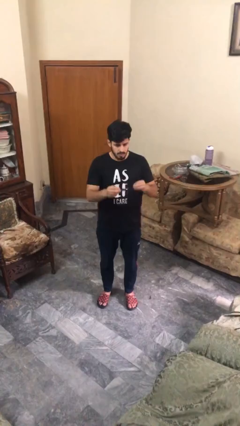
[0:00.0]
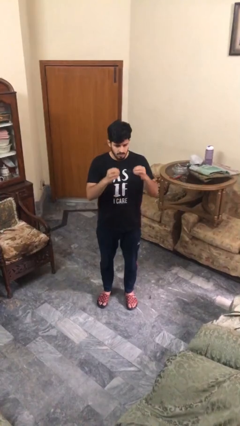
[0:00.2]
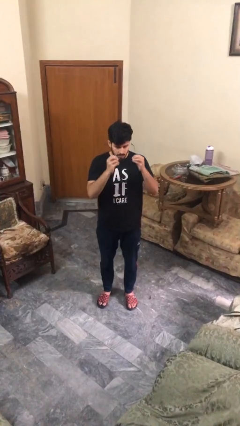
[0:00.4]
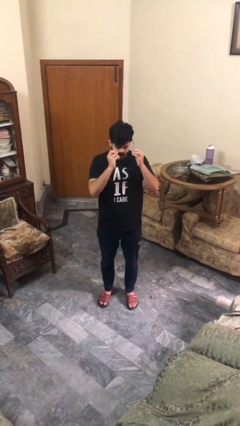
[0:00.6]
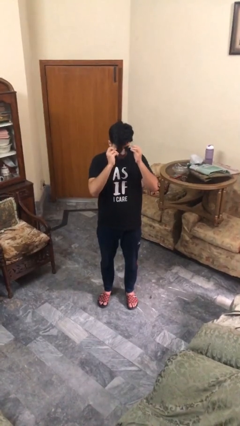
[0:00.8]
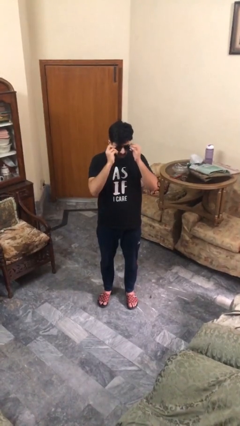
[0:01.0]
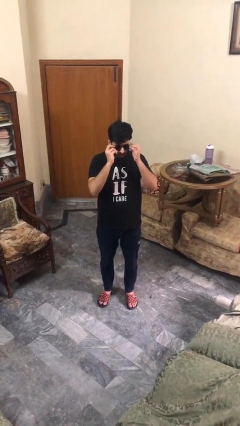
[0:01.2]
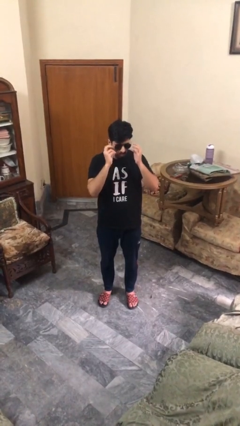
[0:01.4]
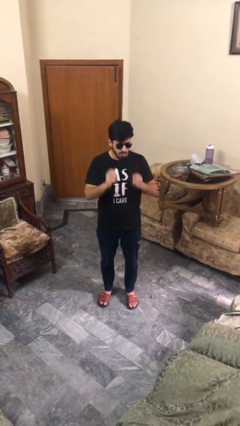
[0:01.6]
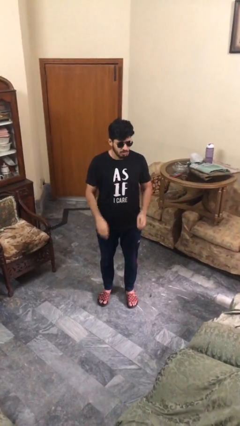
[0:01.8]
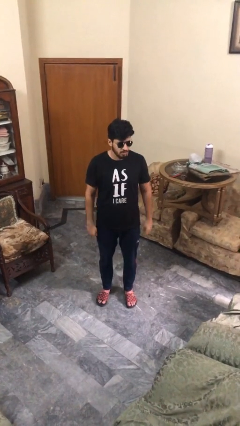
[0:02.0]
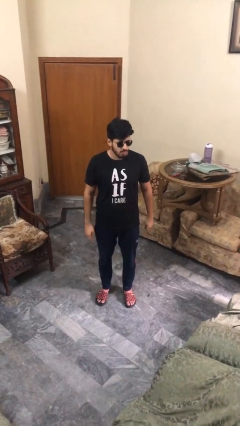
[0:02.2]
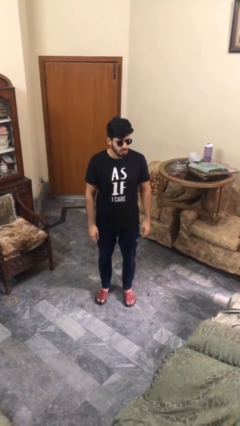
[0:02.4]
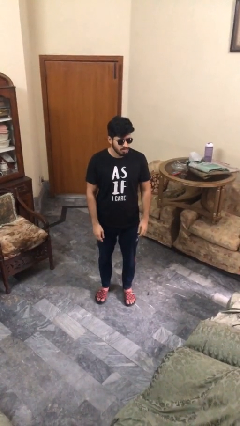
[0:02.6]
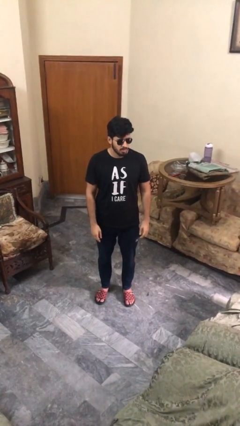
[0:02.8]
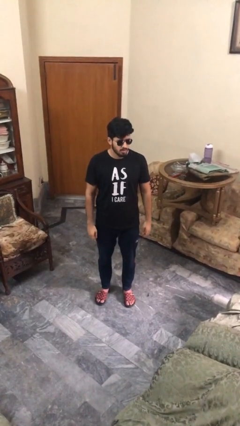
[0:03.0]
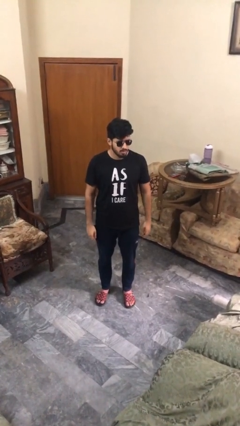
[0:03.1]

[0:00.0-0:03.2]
person puts on sunglasses

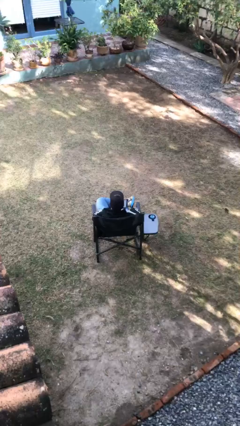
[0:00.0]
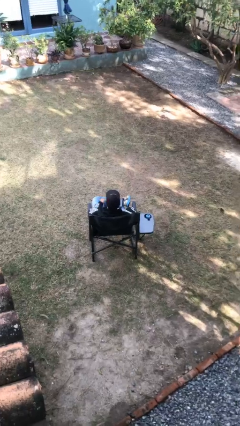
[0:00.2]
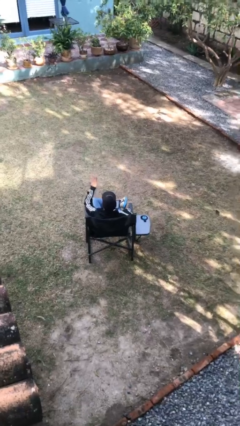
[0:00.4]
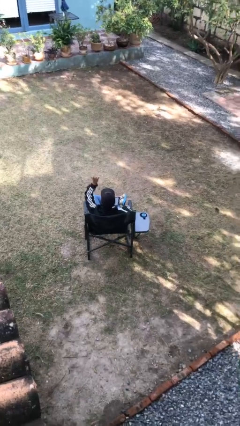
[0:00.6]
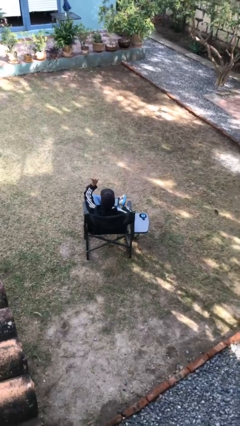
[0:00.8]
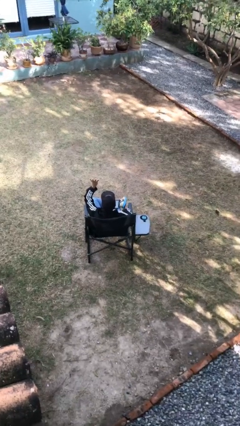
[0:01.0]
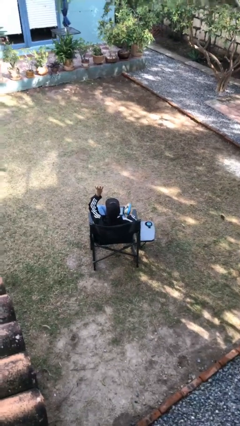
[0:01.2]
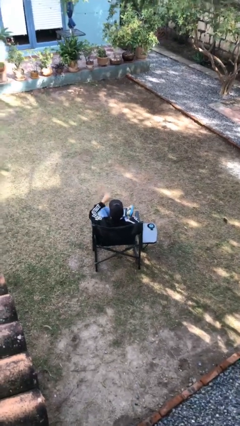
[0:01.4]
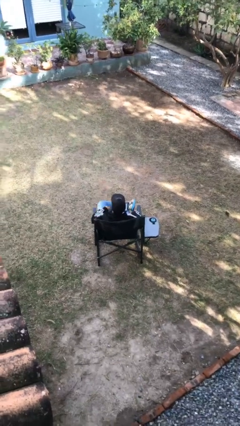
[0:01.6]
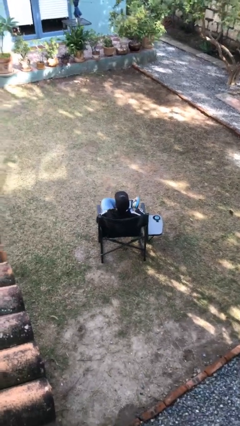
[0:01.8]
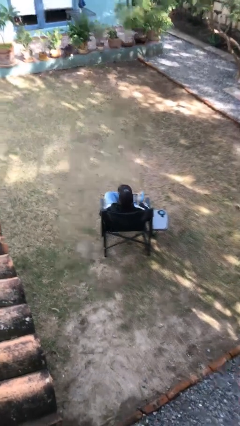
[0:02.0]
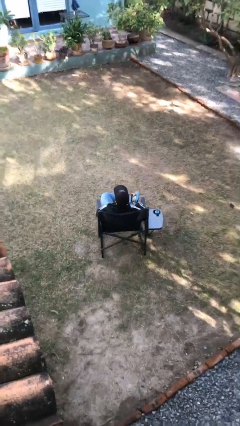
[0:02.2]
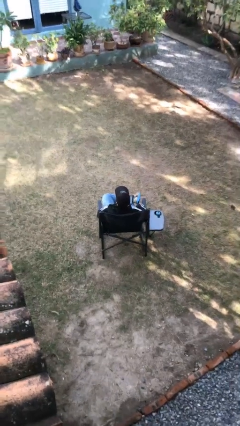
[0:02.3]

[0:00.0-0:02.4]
person gestures number four

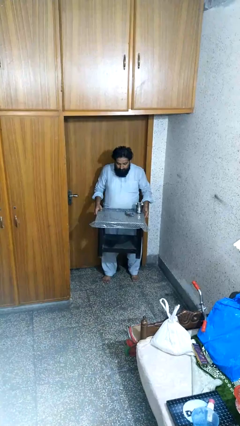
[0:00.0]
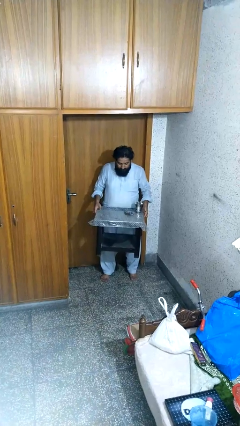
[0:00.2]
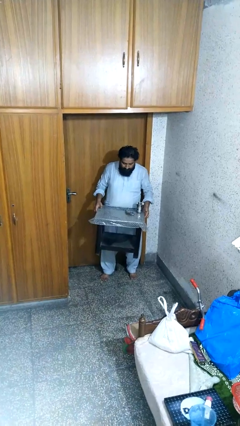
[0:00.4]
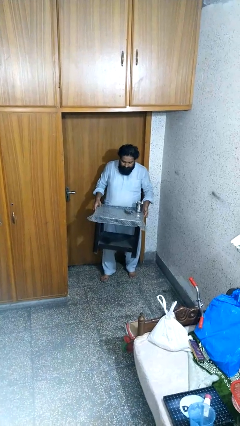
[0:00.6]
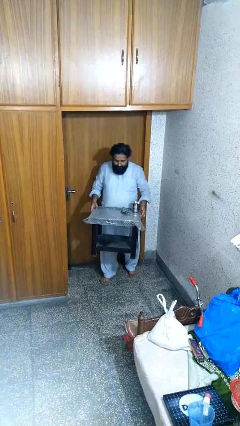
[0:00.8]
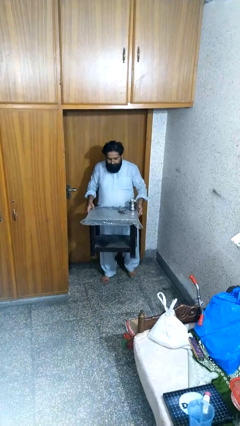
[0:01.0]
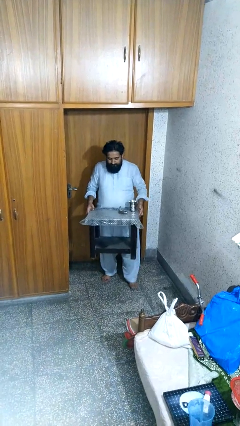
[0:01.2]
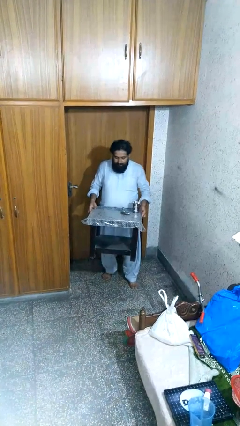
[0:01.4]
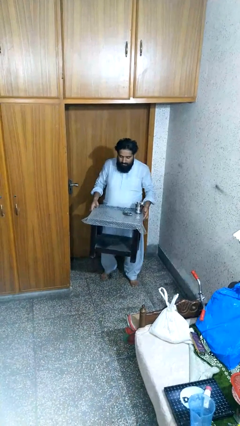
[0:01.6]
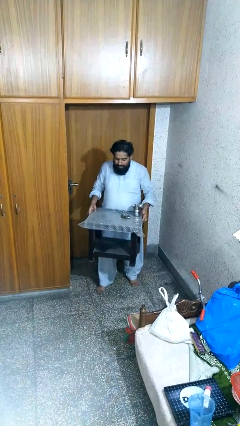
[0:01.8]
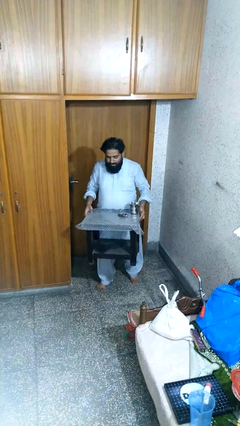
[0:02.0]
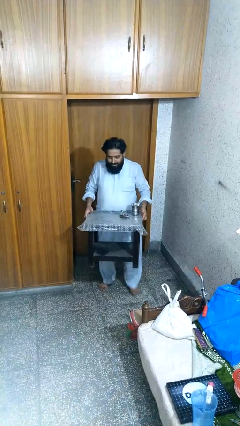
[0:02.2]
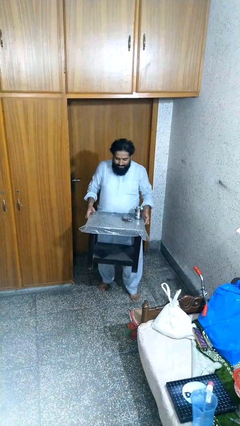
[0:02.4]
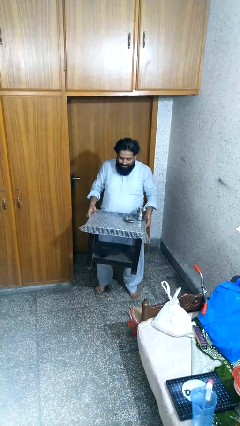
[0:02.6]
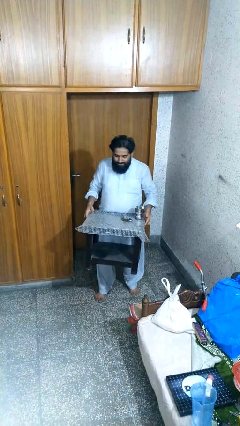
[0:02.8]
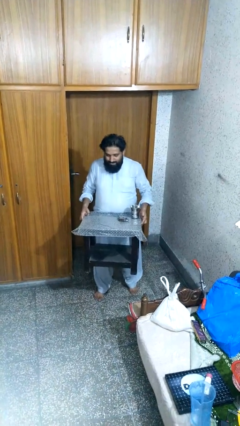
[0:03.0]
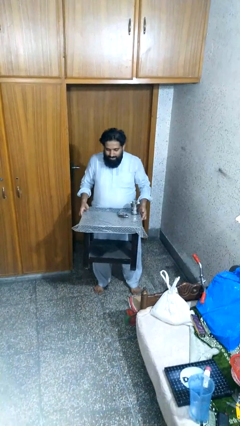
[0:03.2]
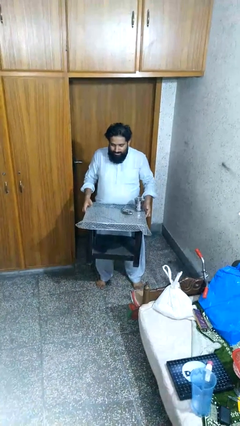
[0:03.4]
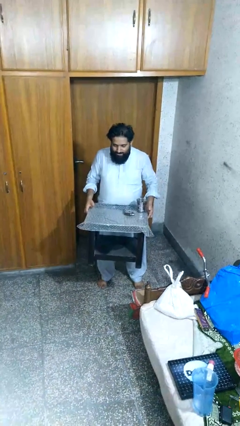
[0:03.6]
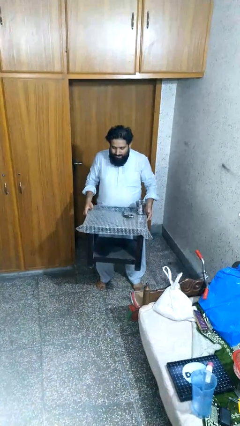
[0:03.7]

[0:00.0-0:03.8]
person carries furniture

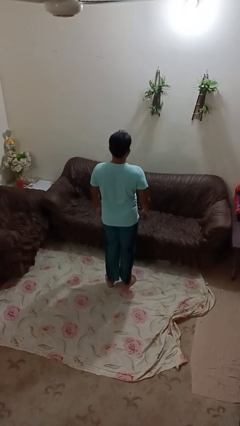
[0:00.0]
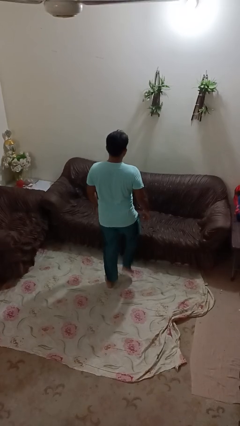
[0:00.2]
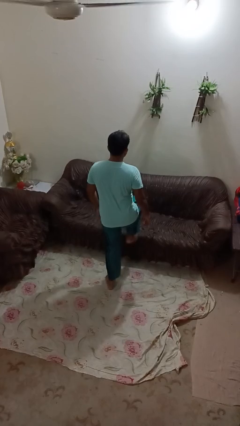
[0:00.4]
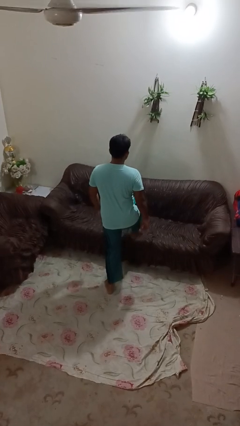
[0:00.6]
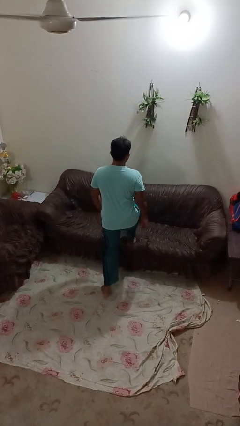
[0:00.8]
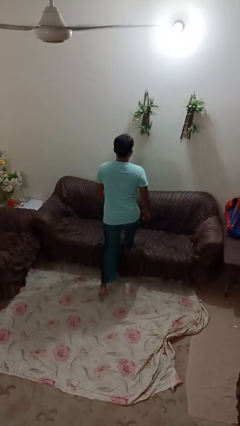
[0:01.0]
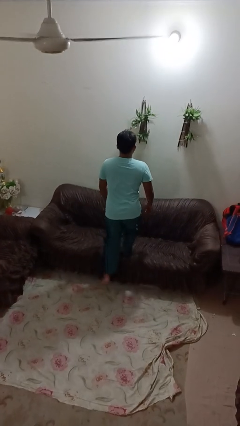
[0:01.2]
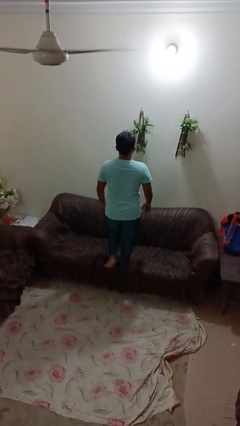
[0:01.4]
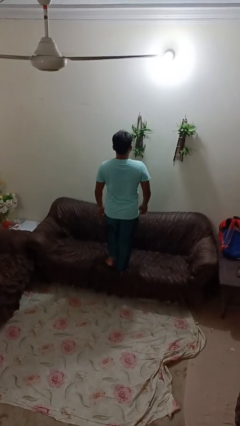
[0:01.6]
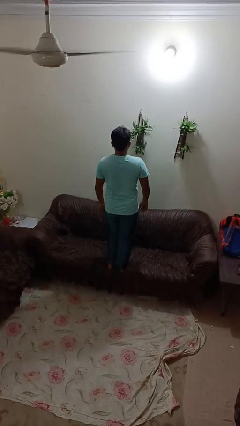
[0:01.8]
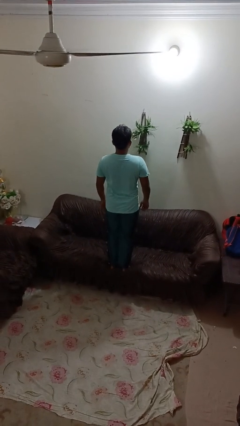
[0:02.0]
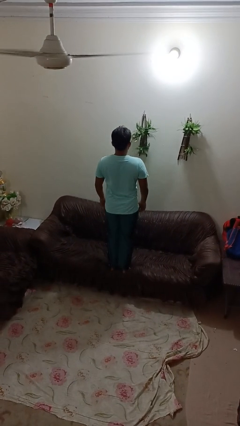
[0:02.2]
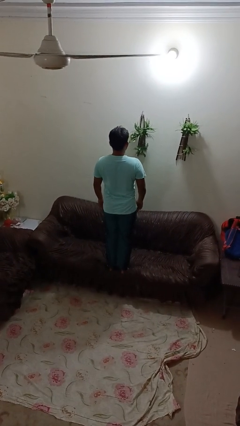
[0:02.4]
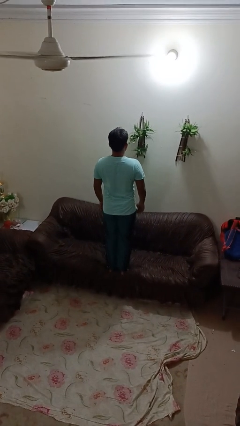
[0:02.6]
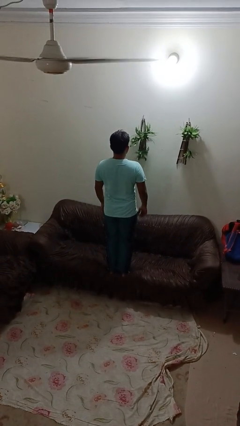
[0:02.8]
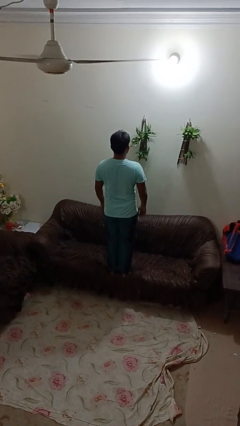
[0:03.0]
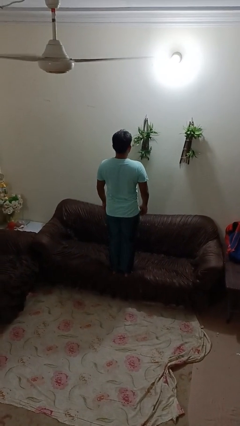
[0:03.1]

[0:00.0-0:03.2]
person climbs on couch

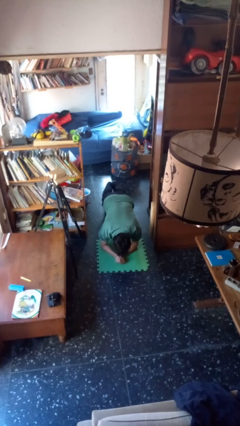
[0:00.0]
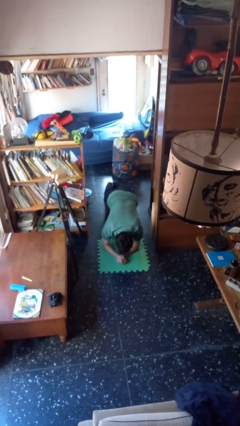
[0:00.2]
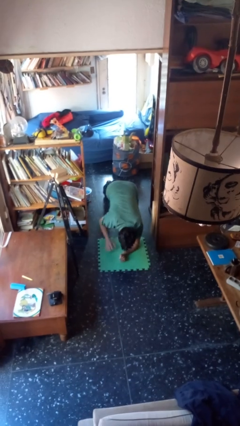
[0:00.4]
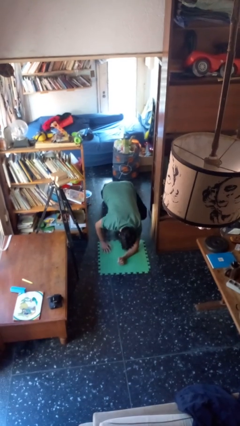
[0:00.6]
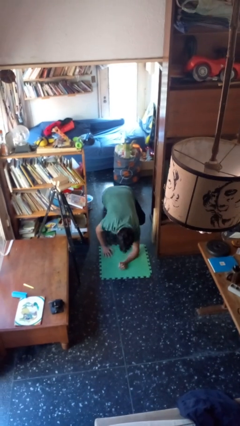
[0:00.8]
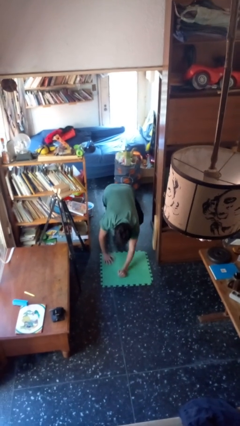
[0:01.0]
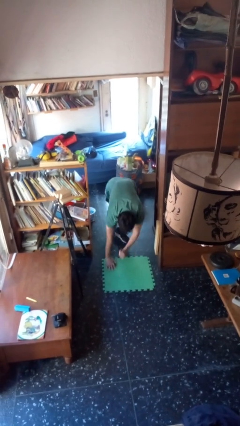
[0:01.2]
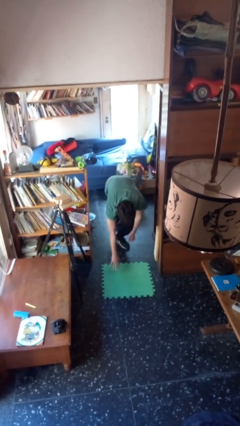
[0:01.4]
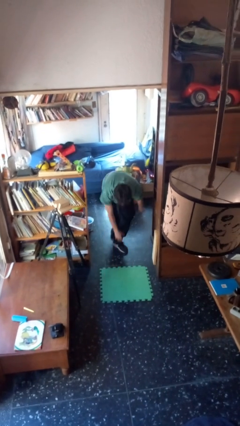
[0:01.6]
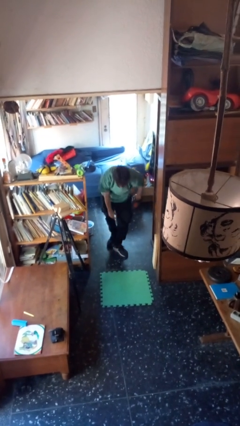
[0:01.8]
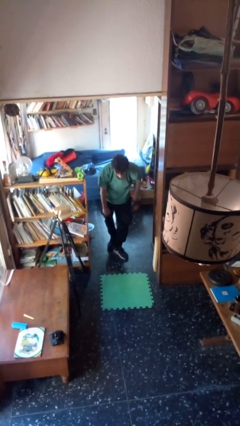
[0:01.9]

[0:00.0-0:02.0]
person stands up from floor

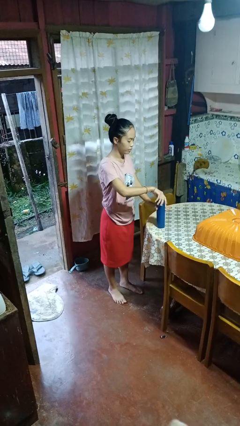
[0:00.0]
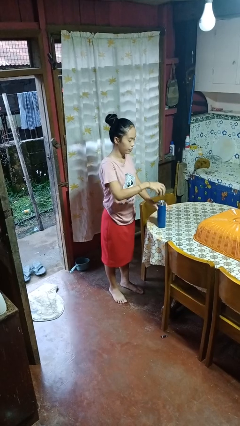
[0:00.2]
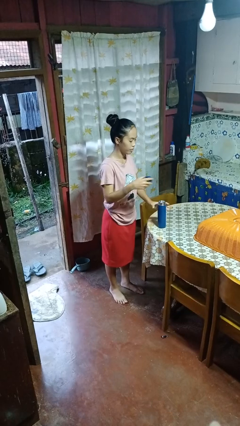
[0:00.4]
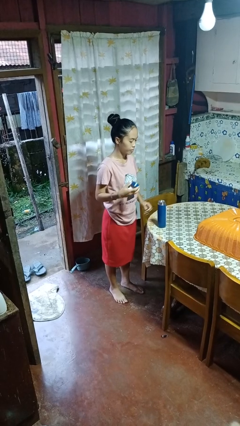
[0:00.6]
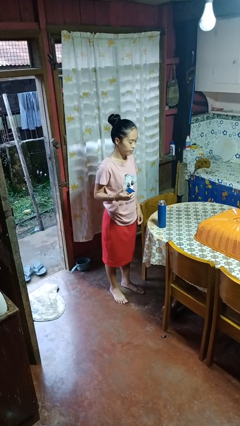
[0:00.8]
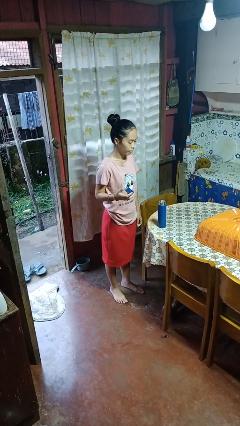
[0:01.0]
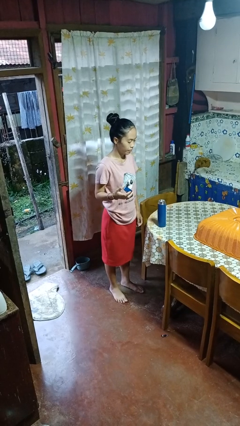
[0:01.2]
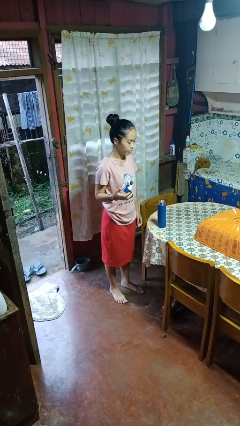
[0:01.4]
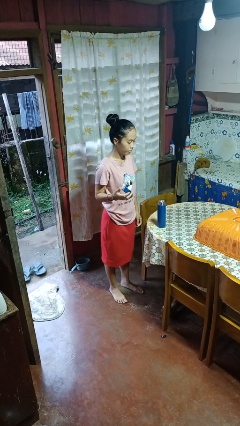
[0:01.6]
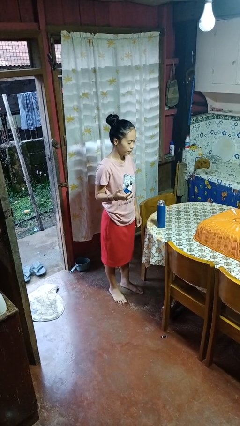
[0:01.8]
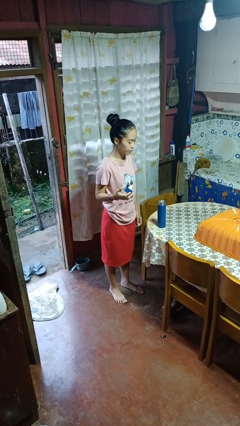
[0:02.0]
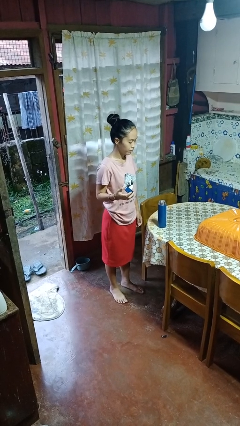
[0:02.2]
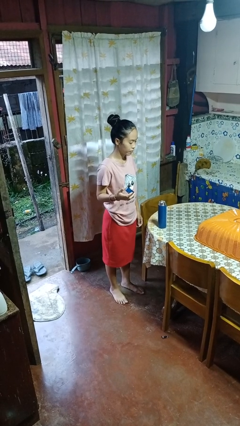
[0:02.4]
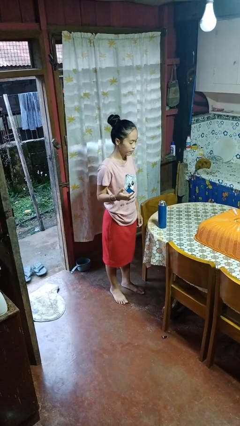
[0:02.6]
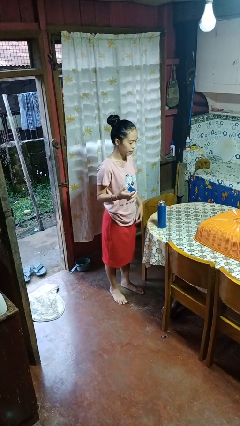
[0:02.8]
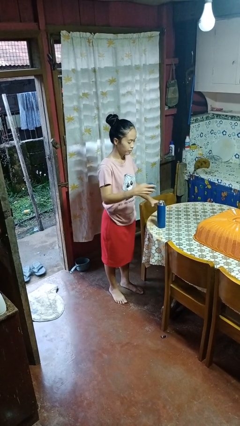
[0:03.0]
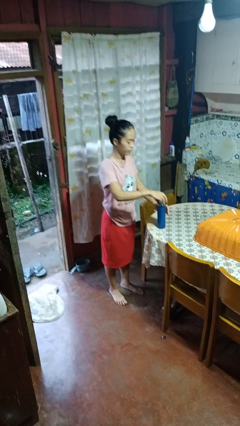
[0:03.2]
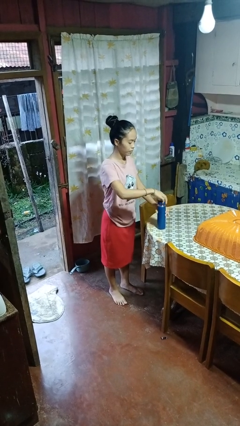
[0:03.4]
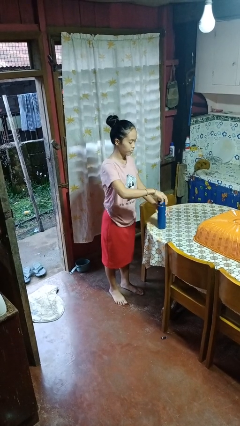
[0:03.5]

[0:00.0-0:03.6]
person opens jar
